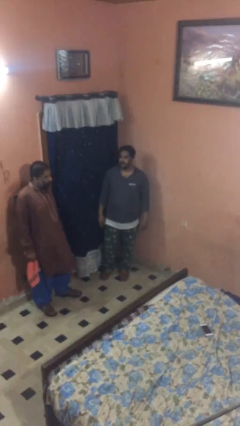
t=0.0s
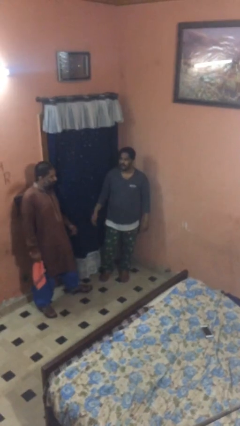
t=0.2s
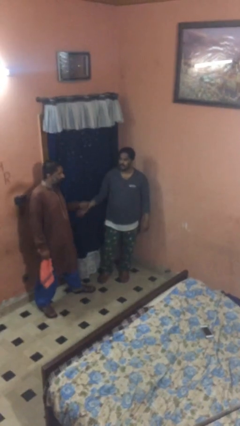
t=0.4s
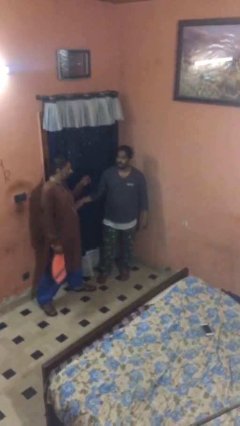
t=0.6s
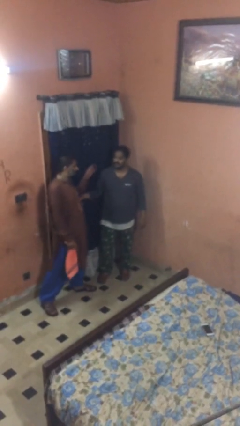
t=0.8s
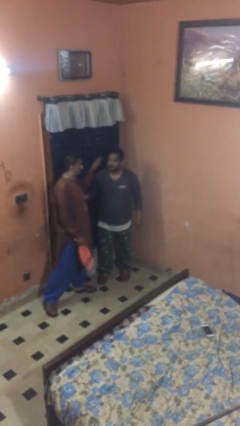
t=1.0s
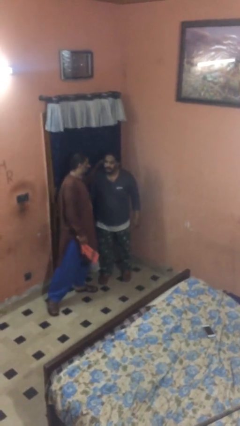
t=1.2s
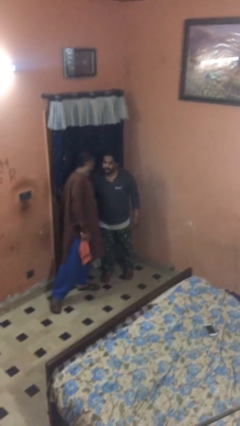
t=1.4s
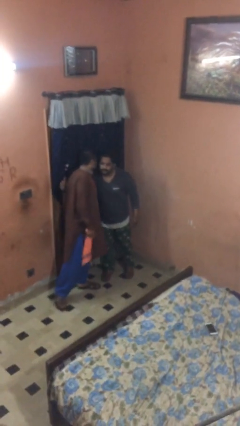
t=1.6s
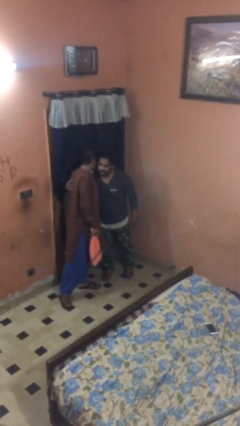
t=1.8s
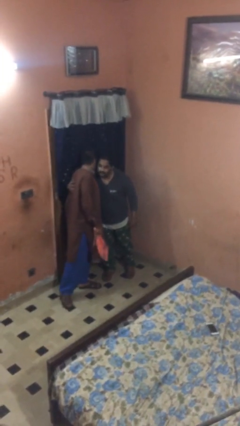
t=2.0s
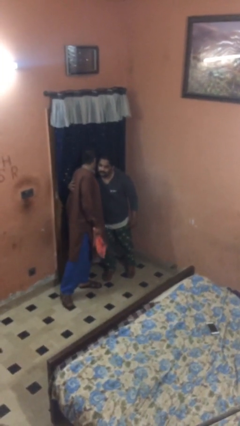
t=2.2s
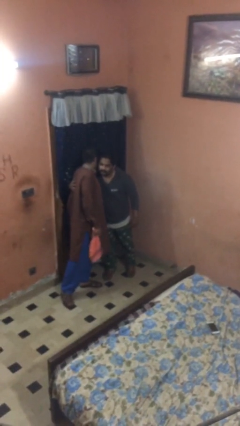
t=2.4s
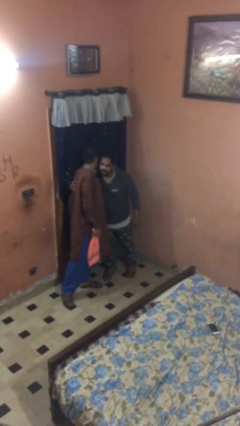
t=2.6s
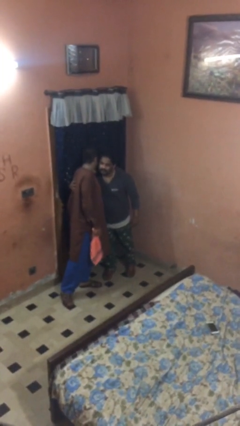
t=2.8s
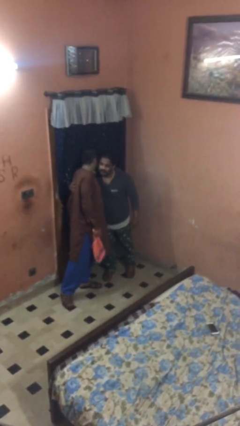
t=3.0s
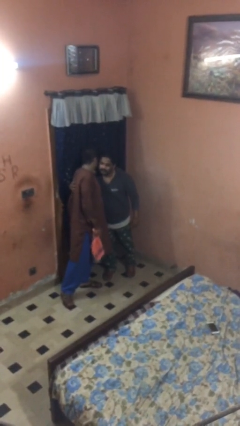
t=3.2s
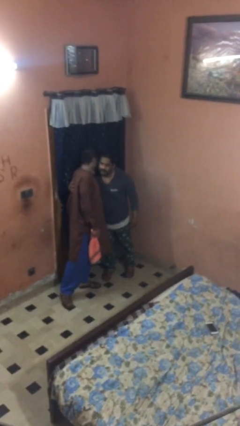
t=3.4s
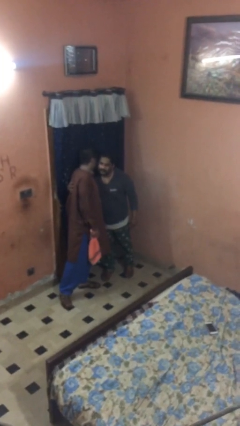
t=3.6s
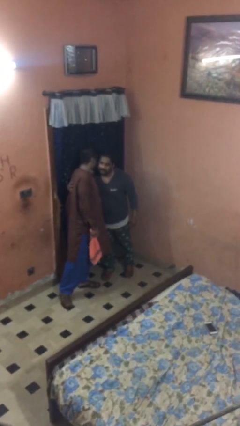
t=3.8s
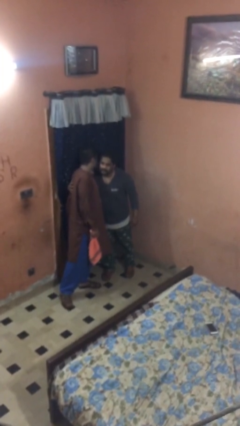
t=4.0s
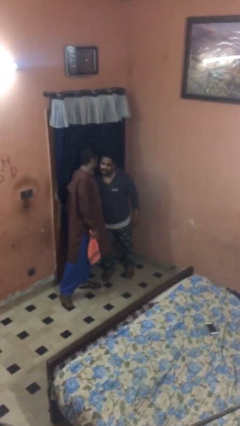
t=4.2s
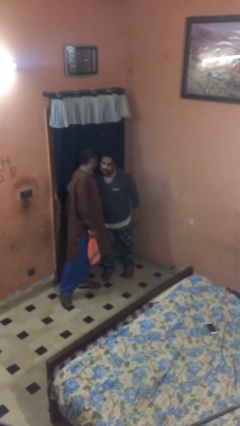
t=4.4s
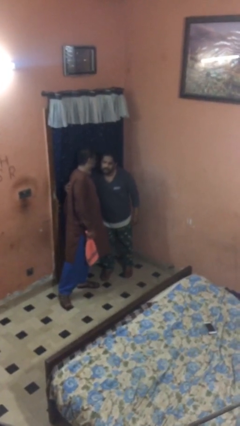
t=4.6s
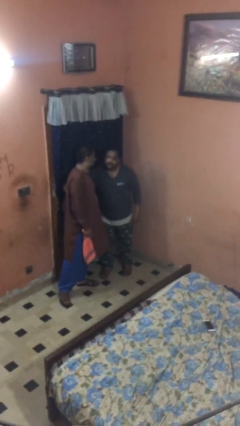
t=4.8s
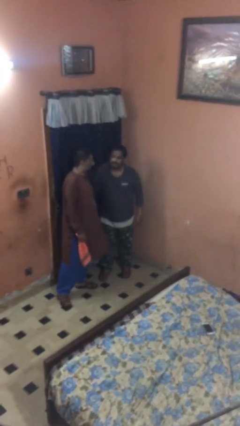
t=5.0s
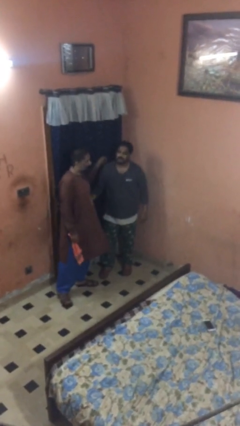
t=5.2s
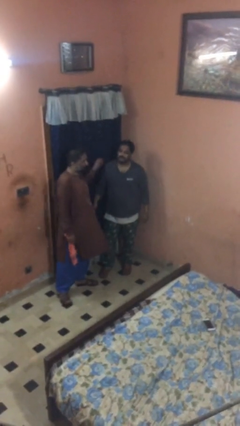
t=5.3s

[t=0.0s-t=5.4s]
person embraces person

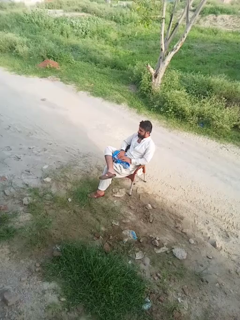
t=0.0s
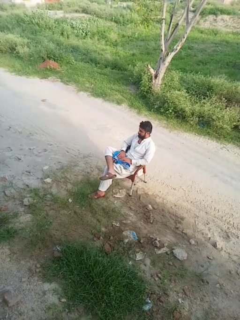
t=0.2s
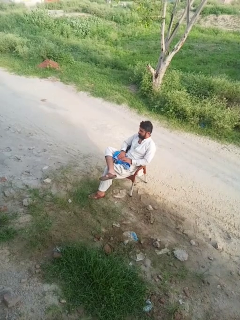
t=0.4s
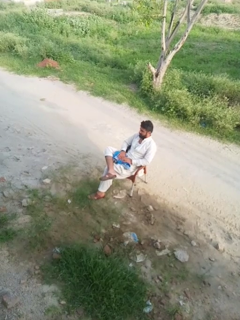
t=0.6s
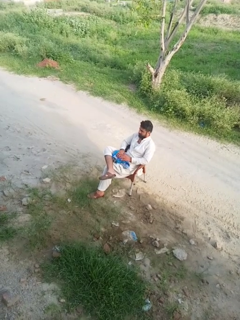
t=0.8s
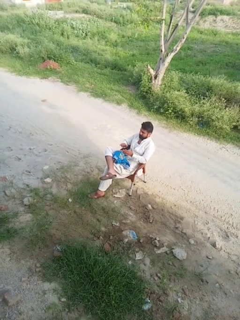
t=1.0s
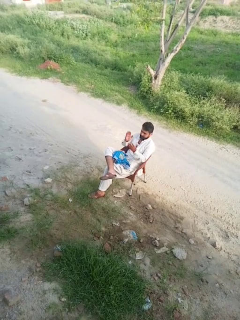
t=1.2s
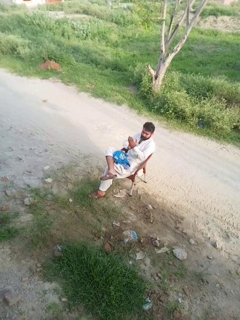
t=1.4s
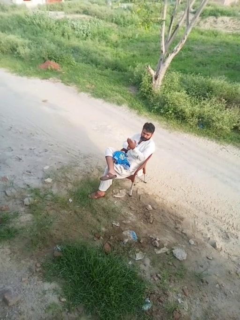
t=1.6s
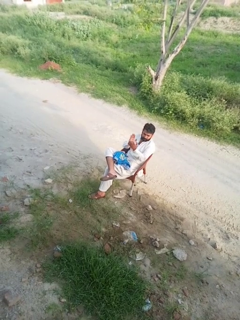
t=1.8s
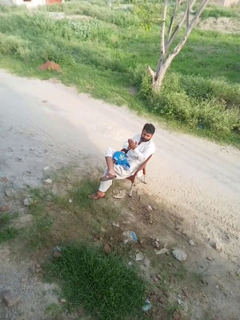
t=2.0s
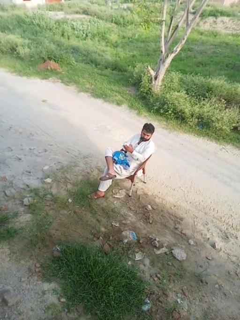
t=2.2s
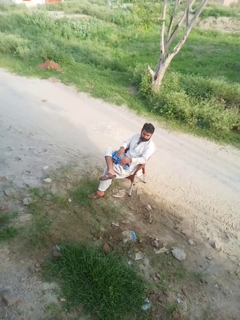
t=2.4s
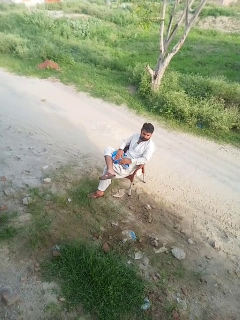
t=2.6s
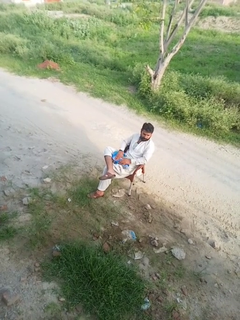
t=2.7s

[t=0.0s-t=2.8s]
person claps hands

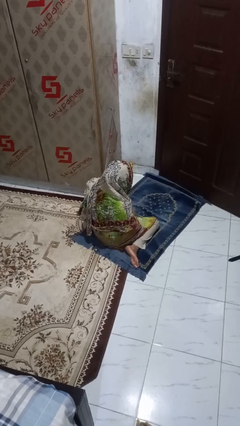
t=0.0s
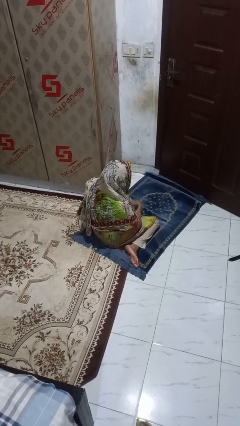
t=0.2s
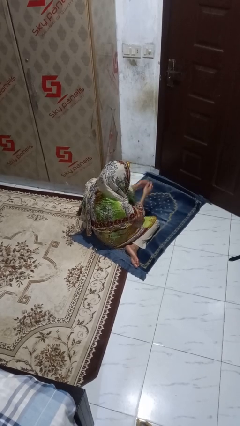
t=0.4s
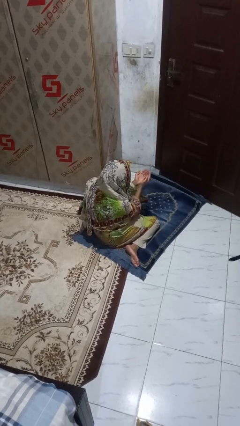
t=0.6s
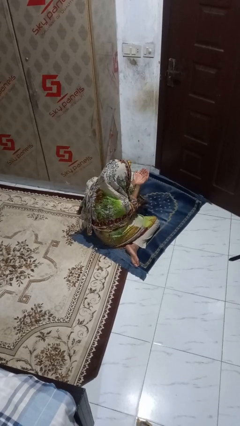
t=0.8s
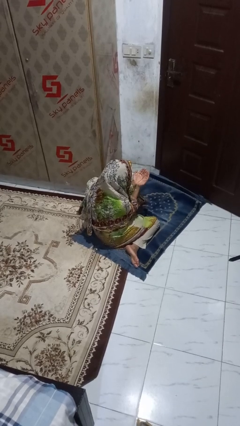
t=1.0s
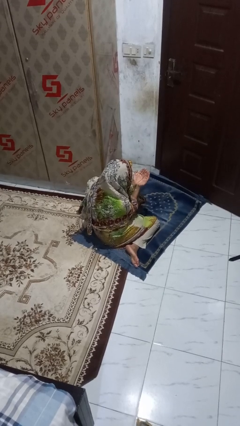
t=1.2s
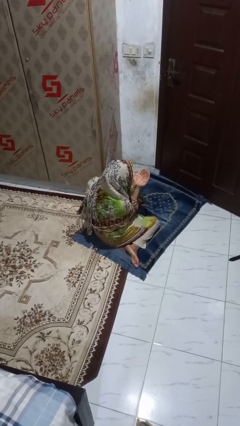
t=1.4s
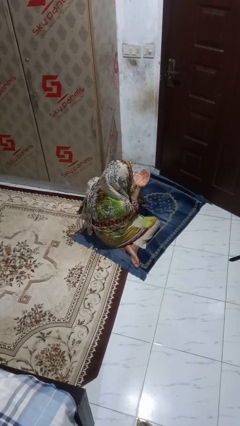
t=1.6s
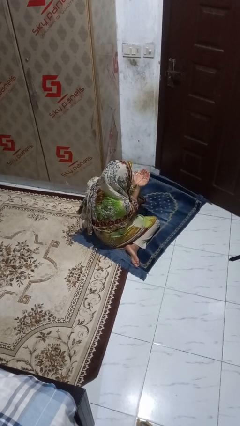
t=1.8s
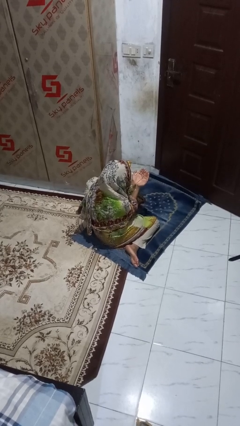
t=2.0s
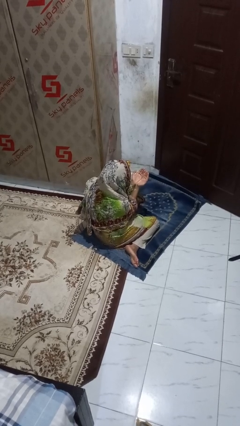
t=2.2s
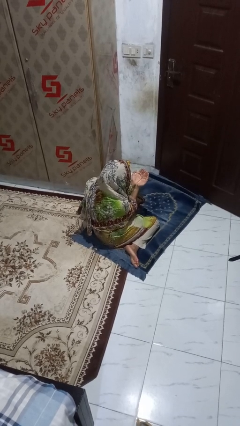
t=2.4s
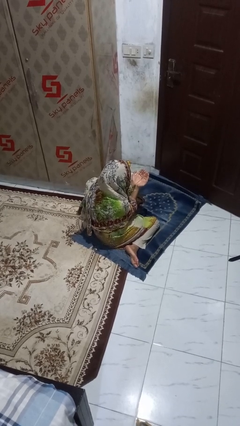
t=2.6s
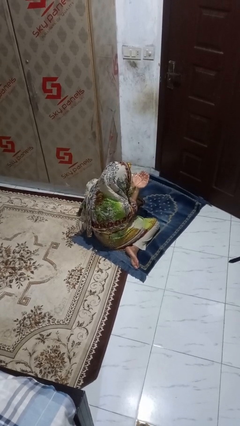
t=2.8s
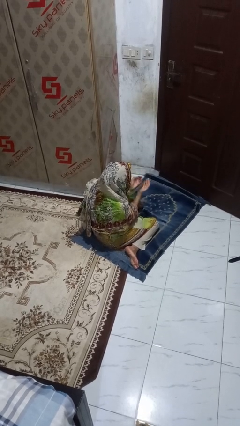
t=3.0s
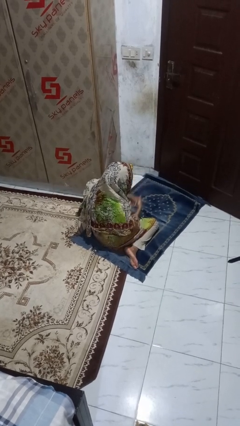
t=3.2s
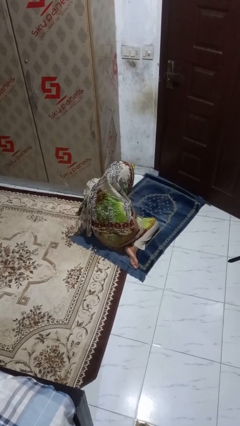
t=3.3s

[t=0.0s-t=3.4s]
person prays

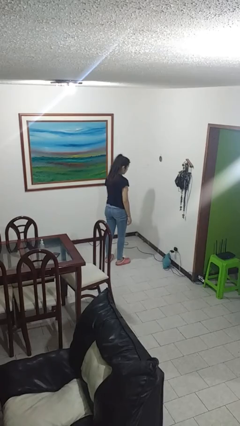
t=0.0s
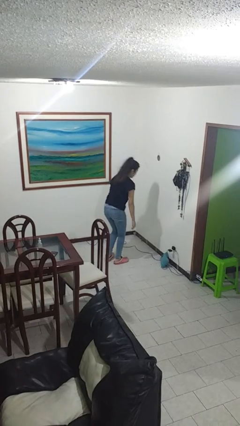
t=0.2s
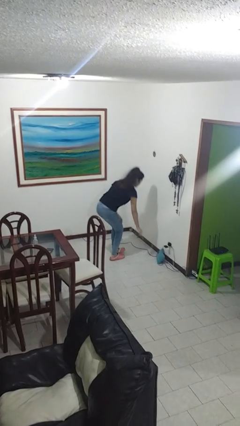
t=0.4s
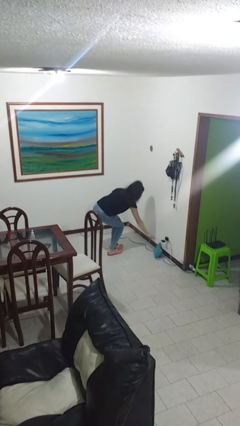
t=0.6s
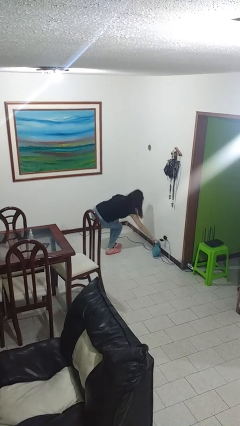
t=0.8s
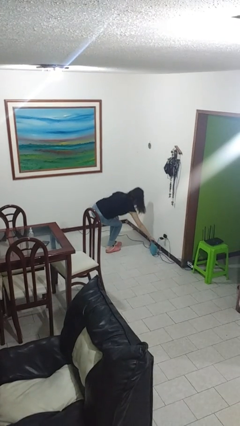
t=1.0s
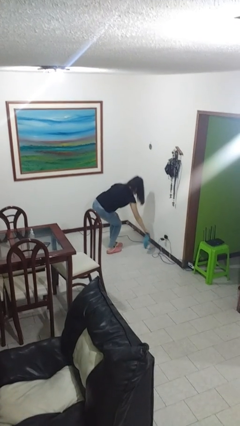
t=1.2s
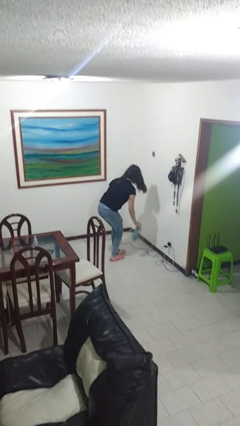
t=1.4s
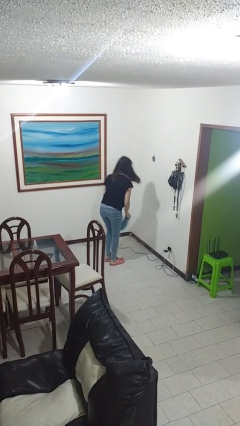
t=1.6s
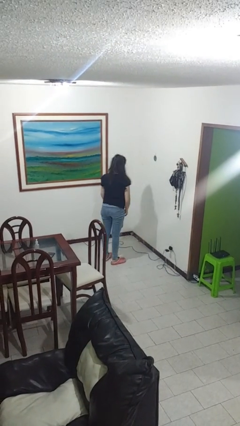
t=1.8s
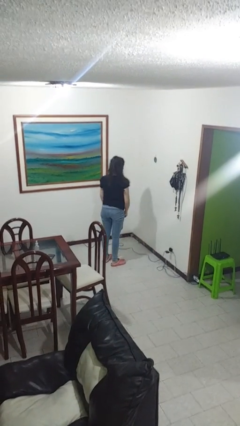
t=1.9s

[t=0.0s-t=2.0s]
person picks up object from floor

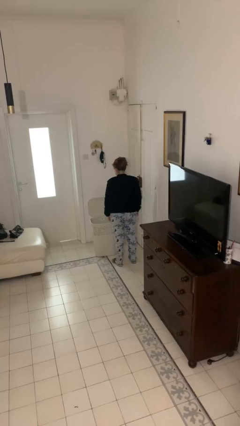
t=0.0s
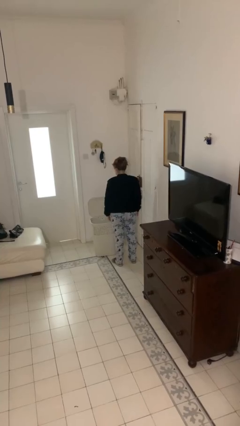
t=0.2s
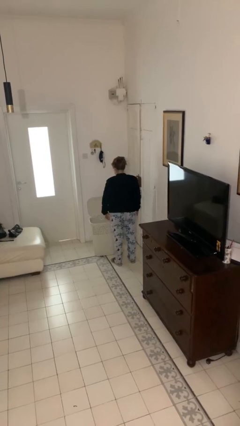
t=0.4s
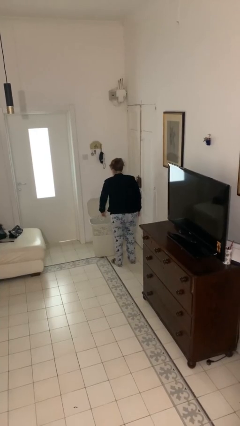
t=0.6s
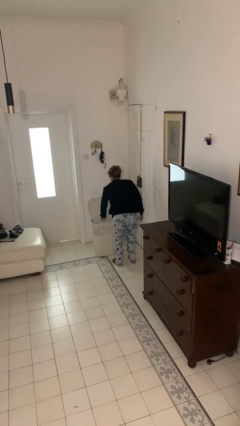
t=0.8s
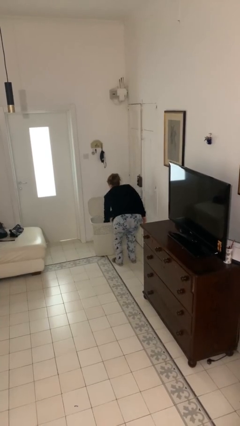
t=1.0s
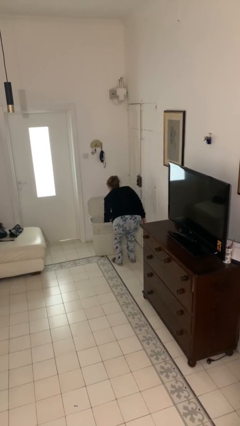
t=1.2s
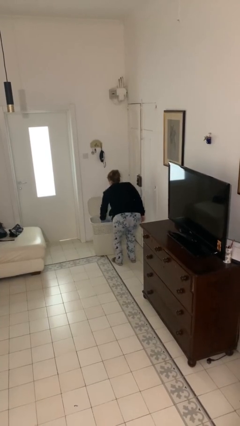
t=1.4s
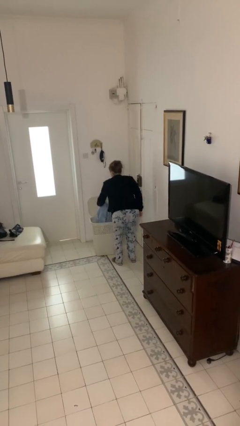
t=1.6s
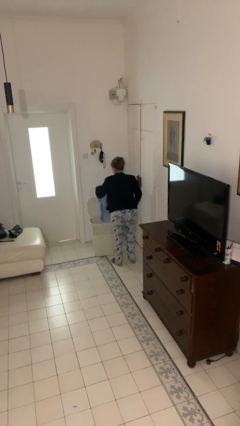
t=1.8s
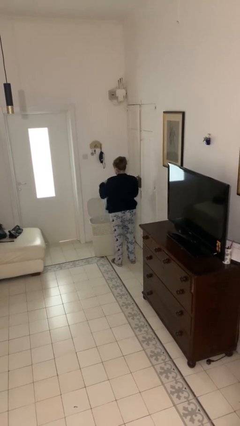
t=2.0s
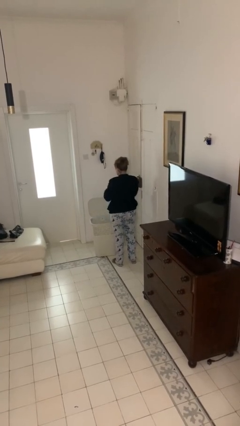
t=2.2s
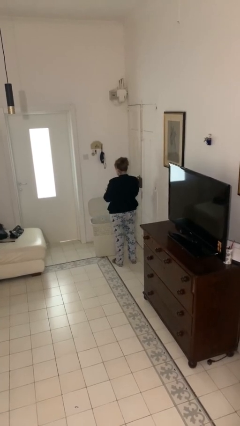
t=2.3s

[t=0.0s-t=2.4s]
person takes object from basket

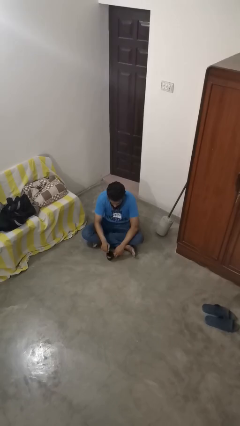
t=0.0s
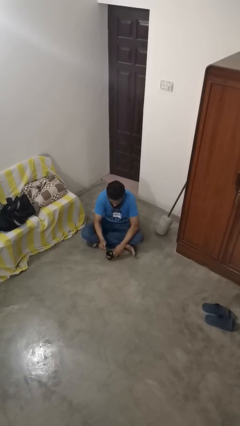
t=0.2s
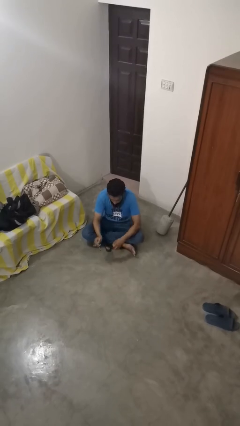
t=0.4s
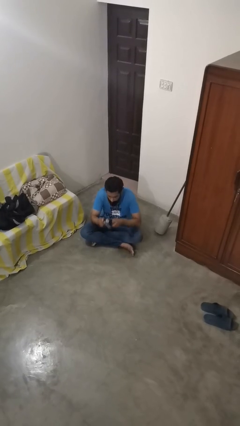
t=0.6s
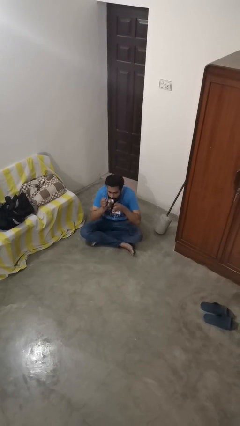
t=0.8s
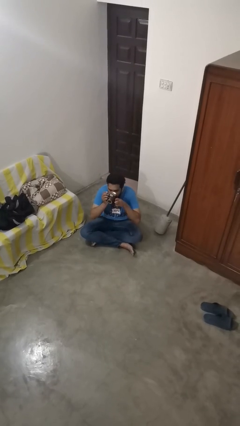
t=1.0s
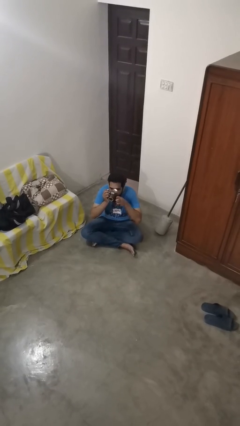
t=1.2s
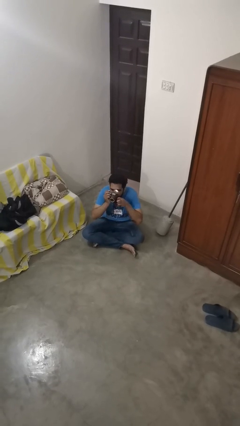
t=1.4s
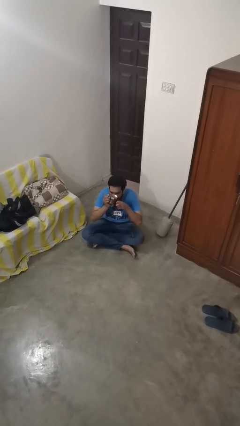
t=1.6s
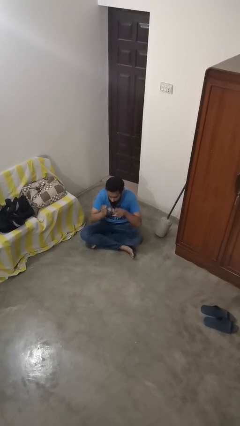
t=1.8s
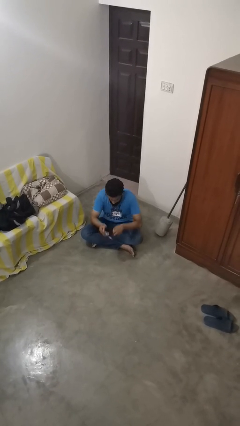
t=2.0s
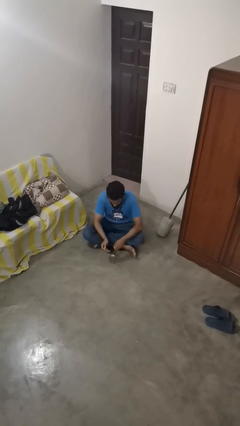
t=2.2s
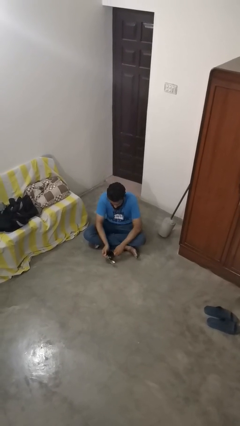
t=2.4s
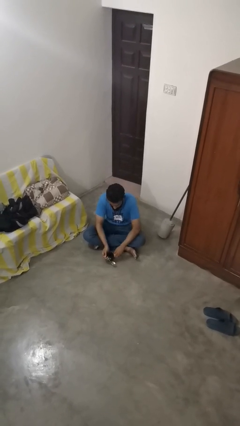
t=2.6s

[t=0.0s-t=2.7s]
person drinks from mug
